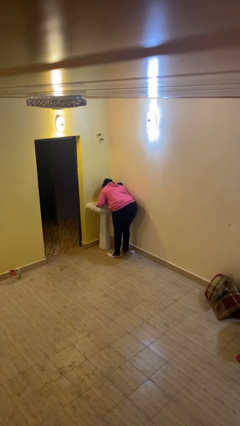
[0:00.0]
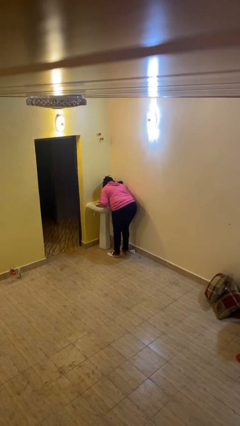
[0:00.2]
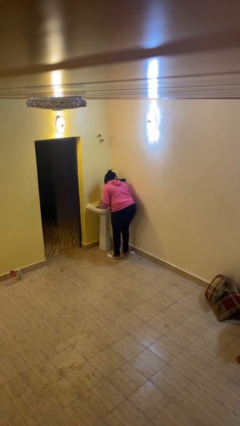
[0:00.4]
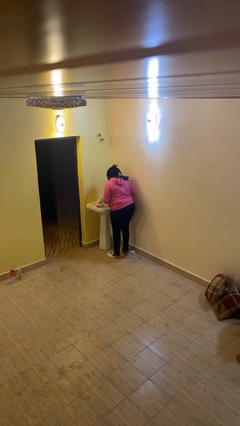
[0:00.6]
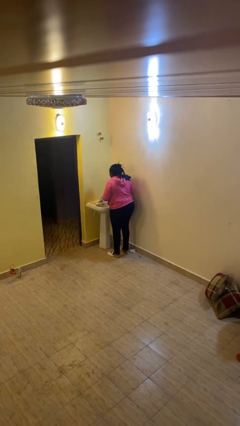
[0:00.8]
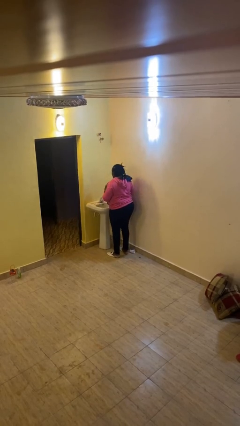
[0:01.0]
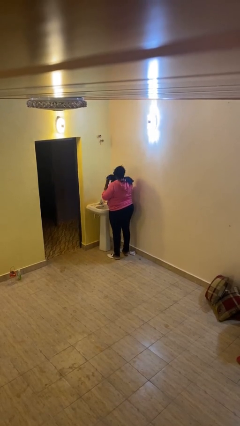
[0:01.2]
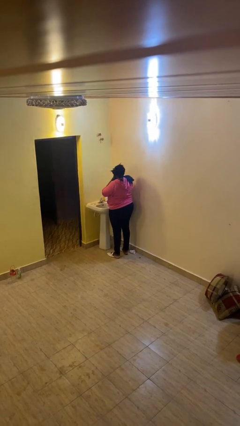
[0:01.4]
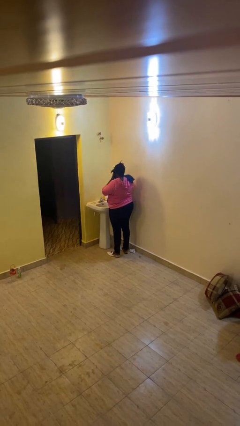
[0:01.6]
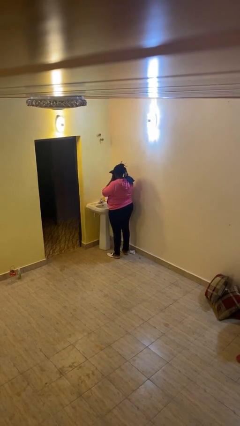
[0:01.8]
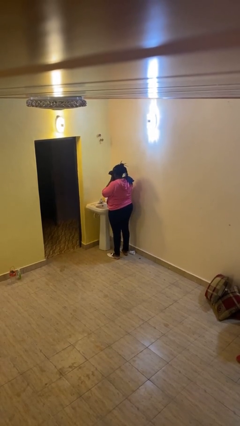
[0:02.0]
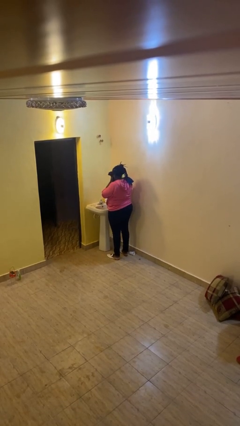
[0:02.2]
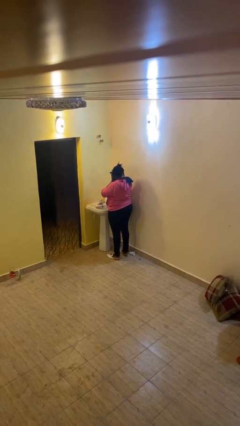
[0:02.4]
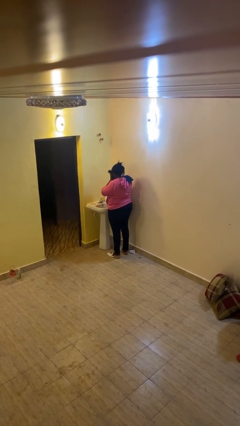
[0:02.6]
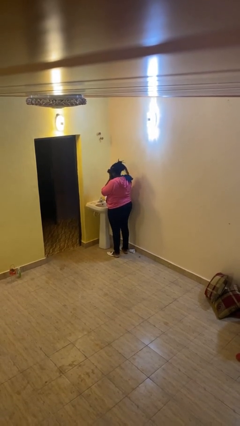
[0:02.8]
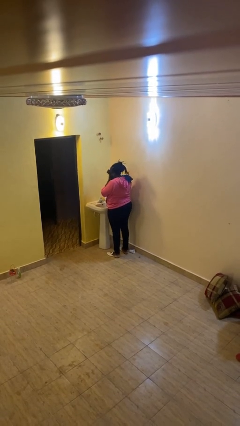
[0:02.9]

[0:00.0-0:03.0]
person dries face with towel

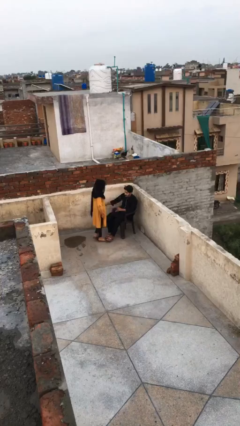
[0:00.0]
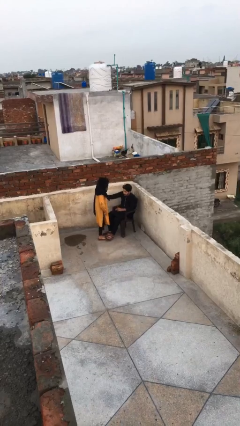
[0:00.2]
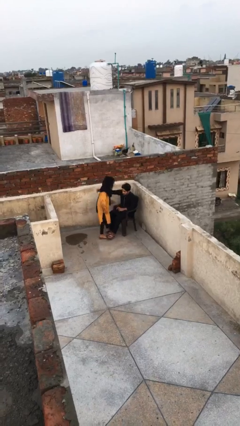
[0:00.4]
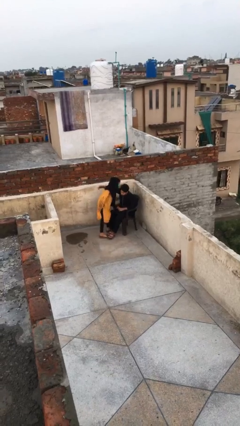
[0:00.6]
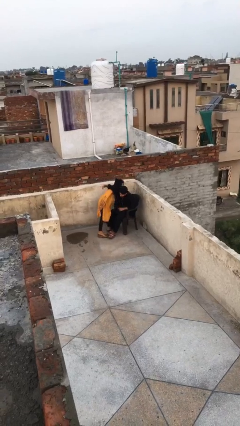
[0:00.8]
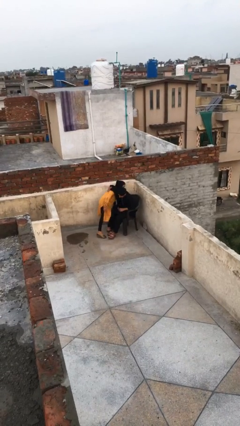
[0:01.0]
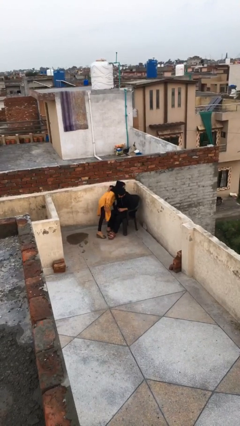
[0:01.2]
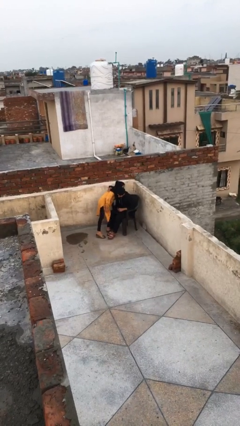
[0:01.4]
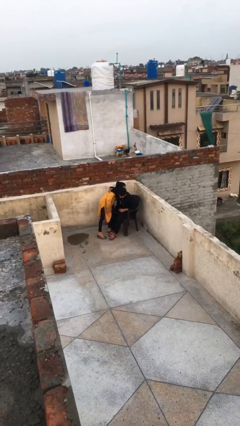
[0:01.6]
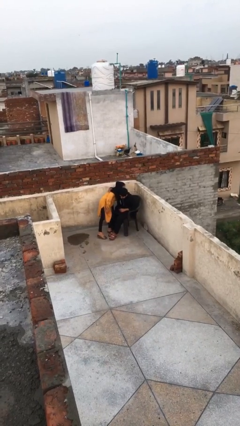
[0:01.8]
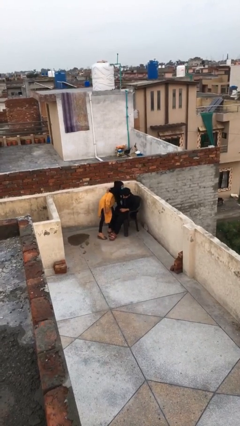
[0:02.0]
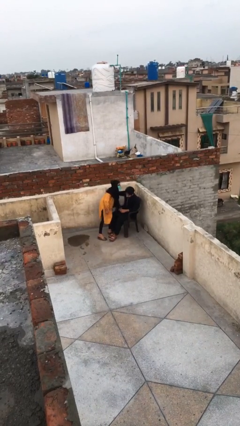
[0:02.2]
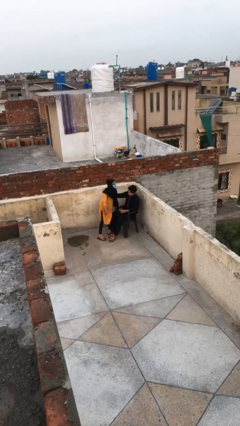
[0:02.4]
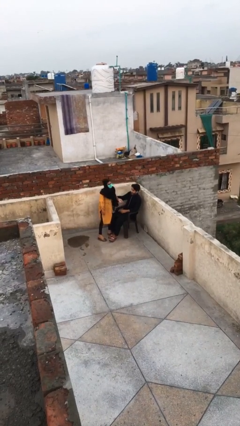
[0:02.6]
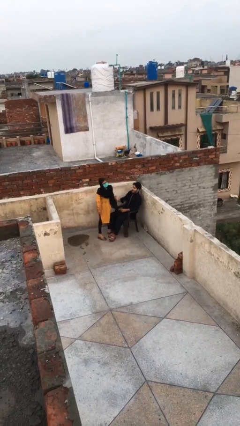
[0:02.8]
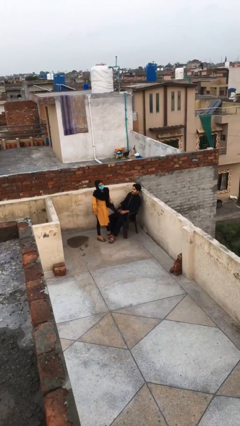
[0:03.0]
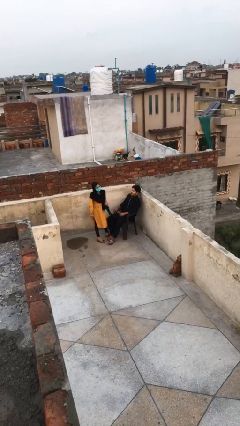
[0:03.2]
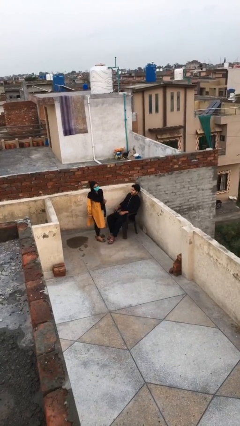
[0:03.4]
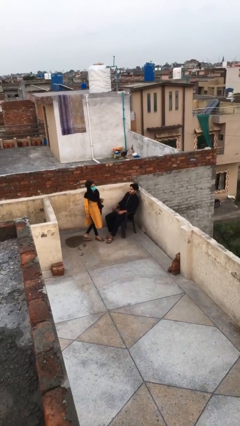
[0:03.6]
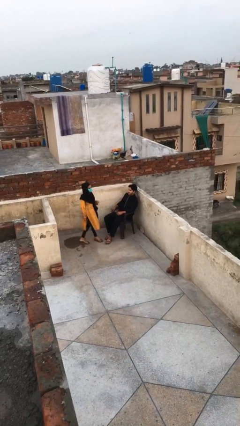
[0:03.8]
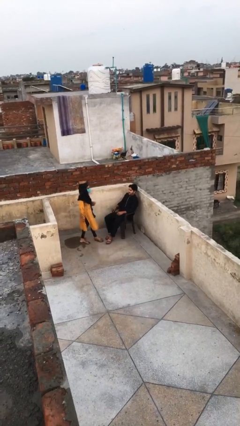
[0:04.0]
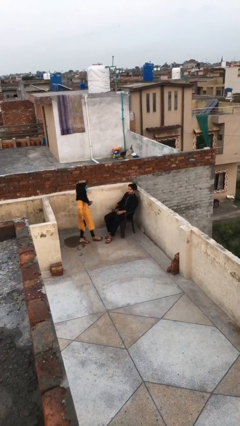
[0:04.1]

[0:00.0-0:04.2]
person embraces person

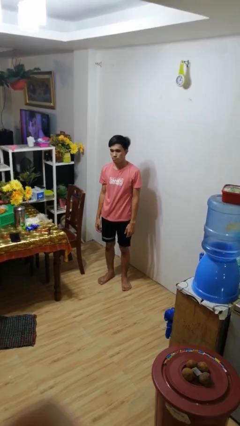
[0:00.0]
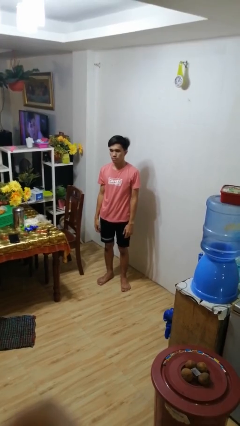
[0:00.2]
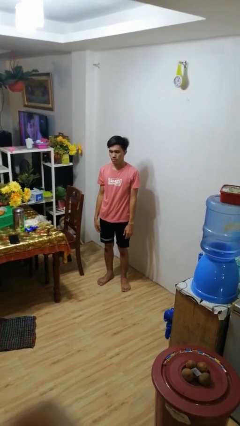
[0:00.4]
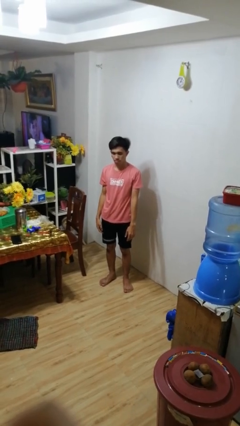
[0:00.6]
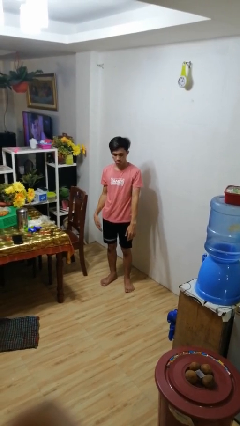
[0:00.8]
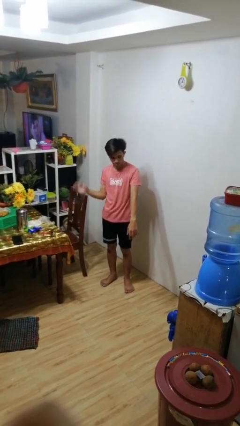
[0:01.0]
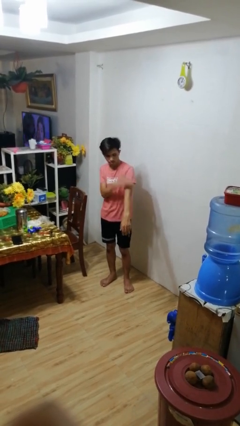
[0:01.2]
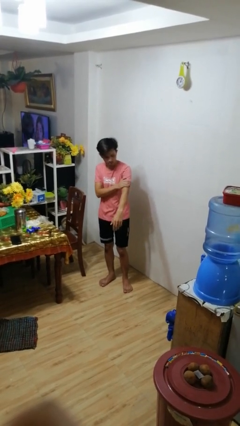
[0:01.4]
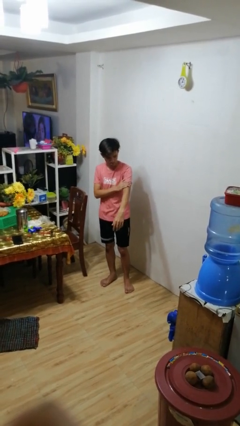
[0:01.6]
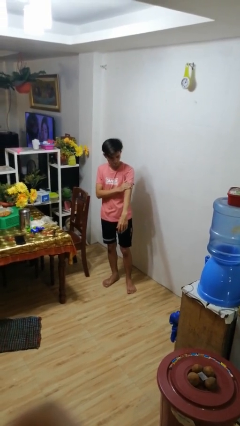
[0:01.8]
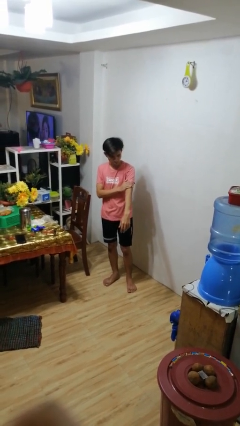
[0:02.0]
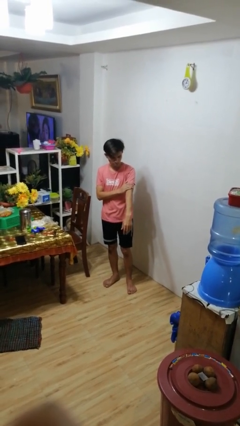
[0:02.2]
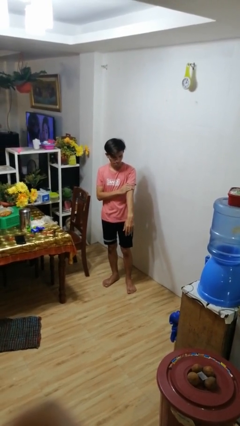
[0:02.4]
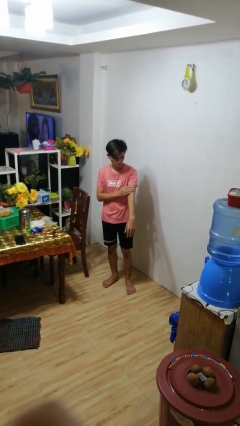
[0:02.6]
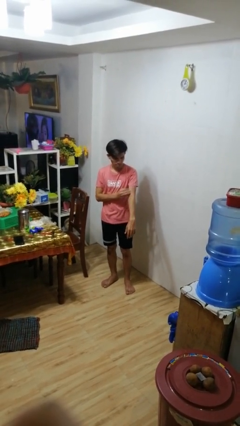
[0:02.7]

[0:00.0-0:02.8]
person swats bug

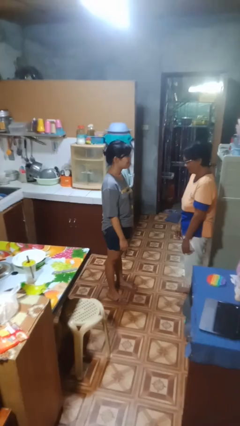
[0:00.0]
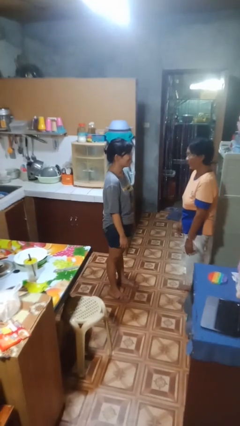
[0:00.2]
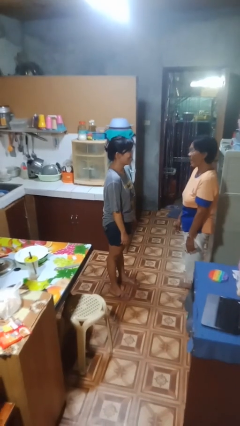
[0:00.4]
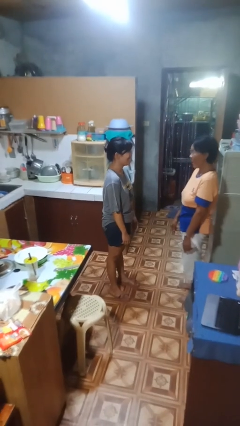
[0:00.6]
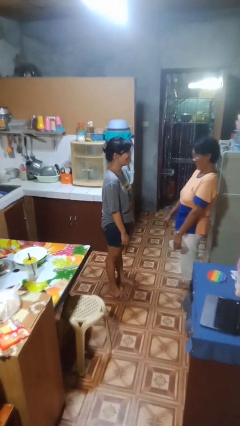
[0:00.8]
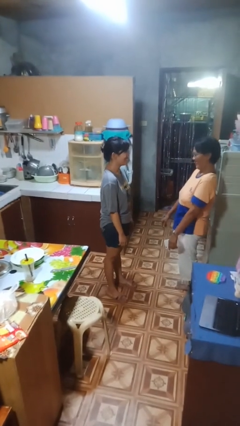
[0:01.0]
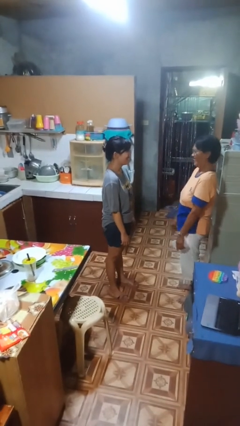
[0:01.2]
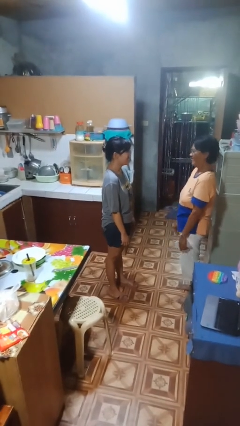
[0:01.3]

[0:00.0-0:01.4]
person laughs with person

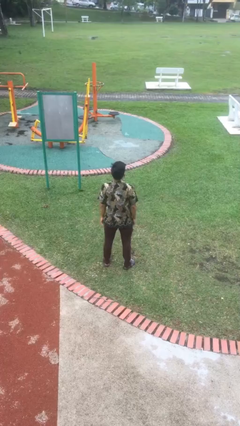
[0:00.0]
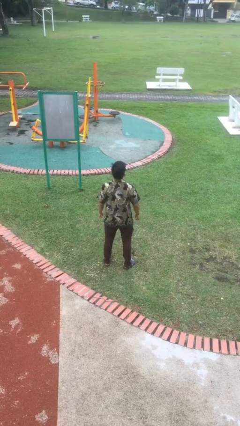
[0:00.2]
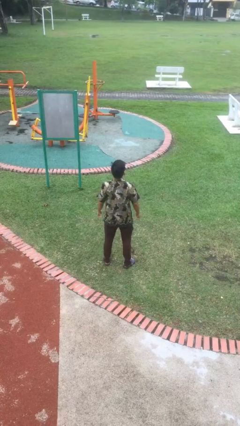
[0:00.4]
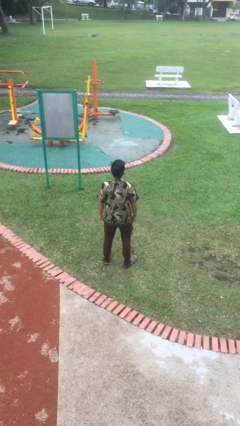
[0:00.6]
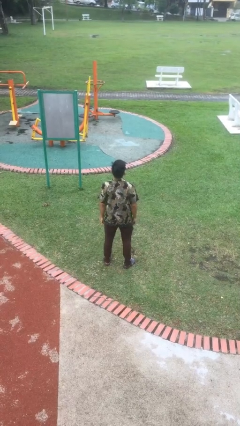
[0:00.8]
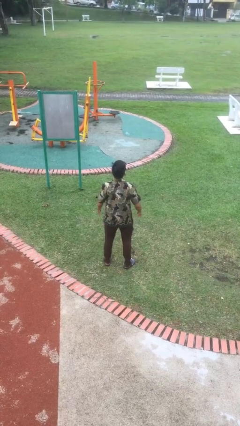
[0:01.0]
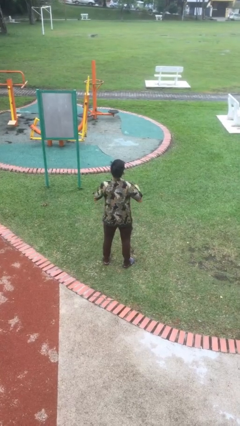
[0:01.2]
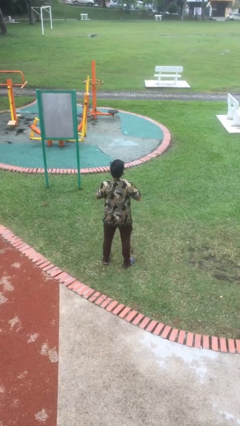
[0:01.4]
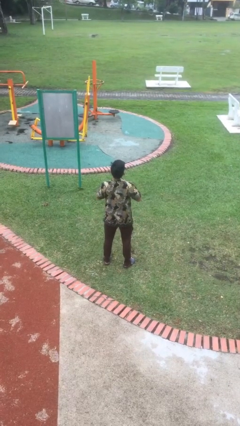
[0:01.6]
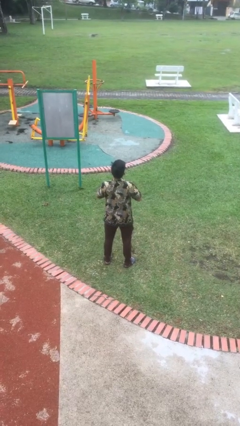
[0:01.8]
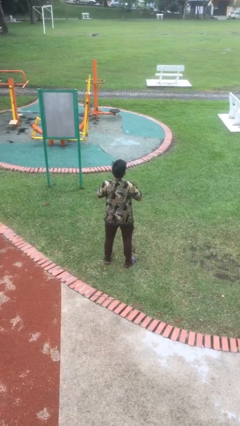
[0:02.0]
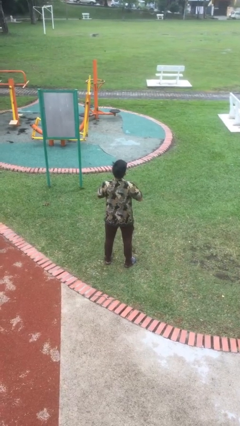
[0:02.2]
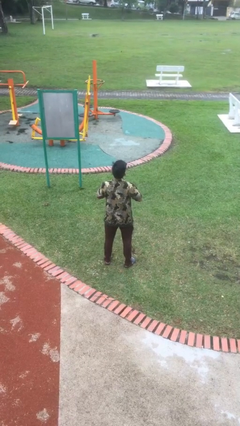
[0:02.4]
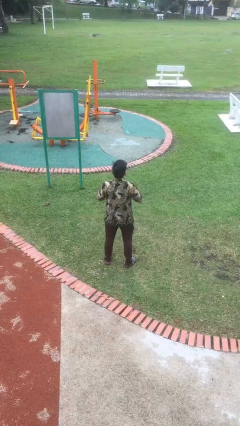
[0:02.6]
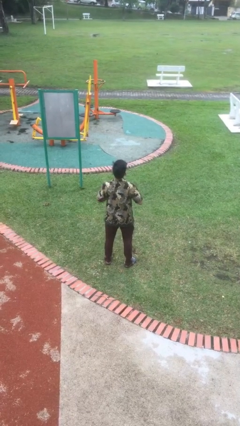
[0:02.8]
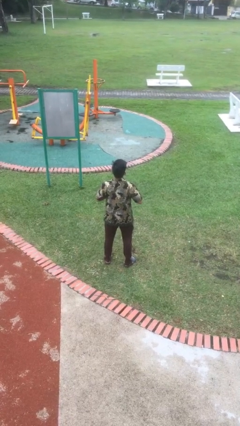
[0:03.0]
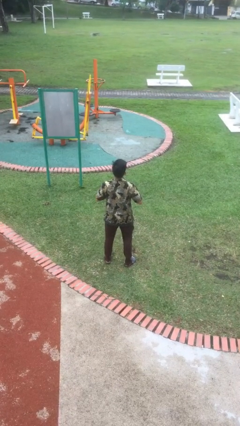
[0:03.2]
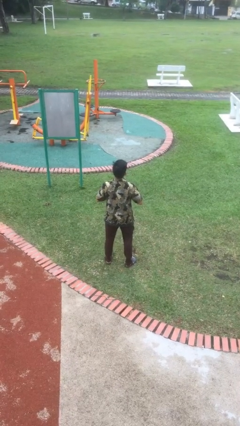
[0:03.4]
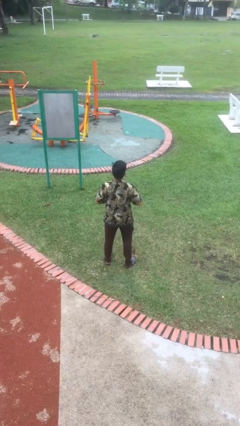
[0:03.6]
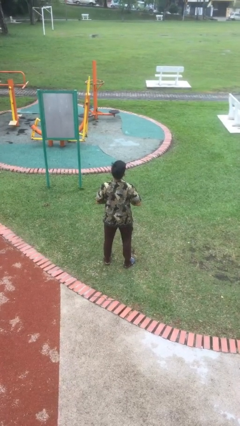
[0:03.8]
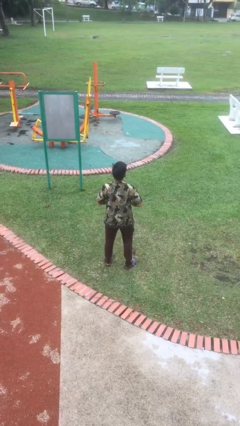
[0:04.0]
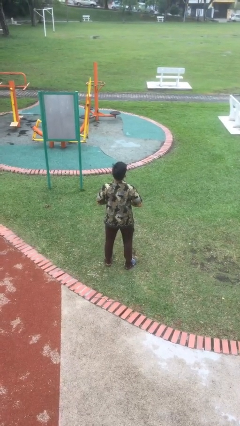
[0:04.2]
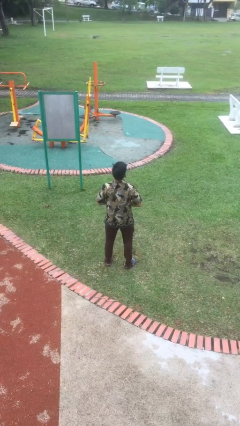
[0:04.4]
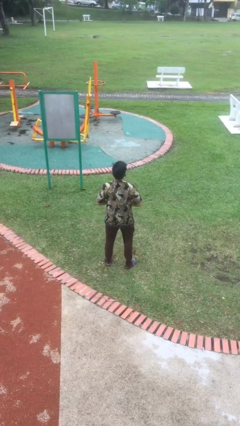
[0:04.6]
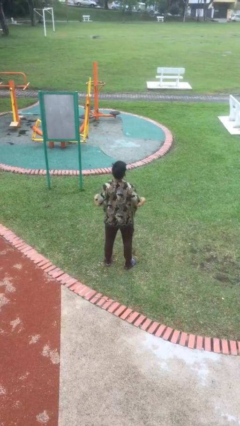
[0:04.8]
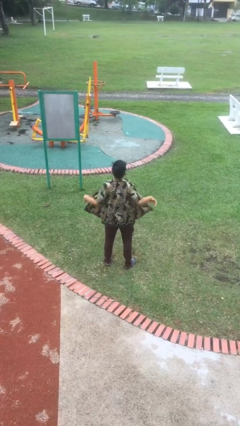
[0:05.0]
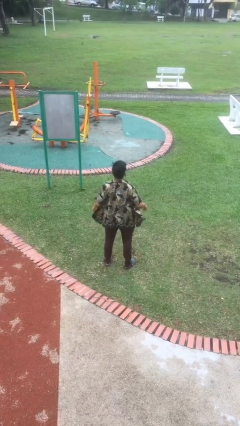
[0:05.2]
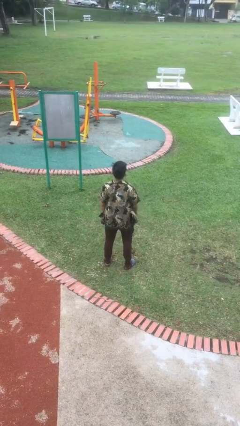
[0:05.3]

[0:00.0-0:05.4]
person unbuttons shirt
